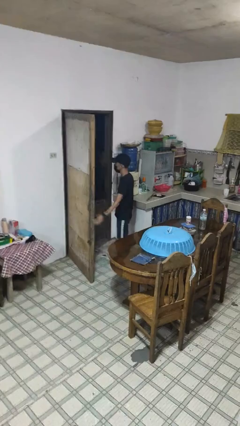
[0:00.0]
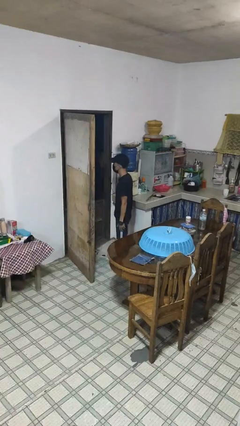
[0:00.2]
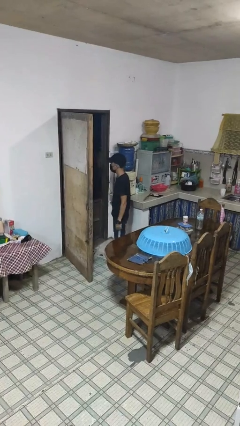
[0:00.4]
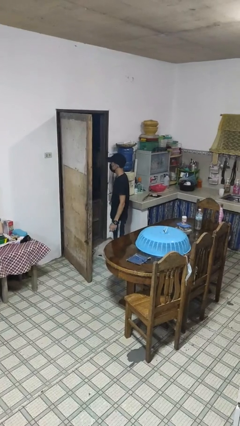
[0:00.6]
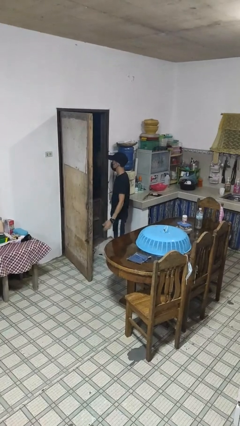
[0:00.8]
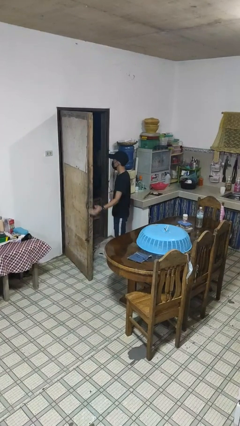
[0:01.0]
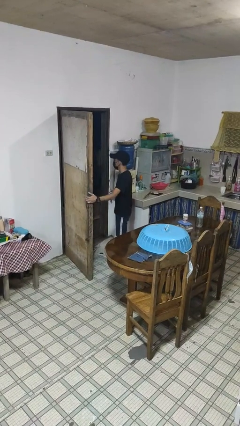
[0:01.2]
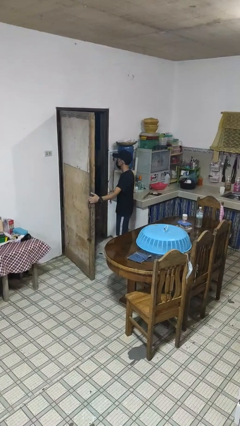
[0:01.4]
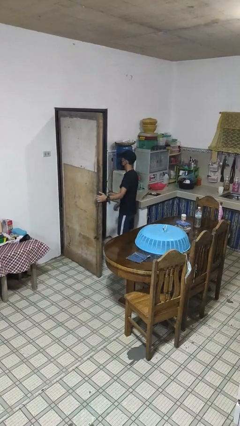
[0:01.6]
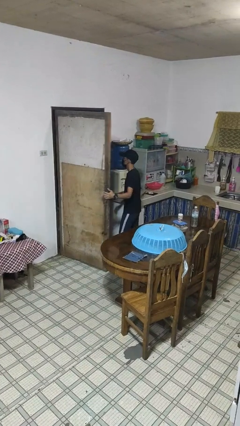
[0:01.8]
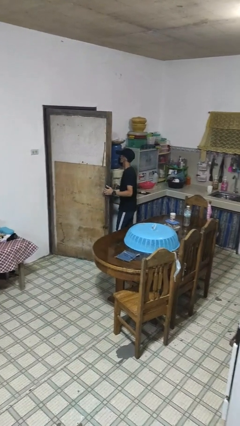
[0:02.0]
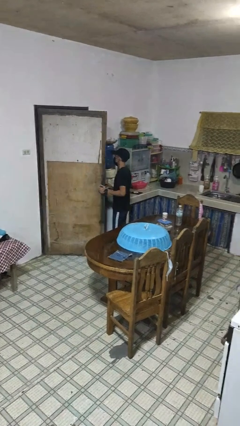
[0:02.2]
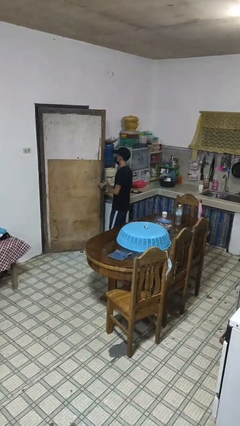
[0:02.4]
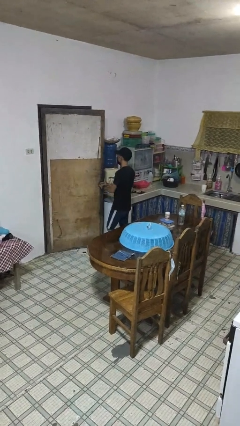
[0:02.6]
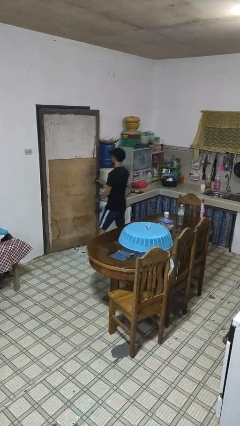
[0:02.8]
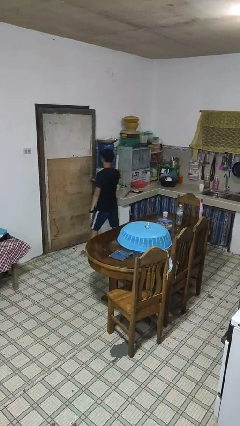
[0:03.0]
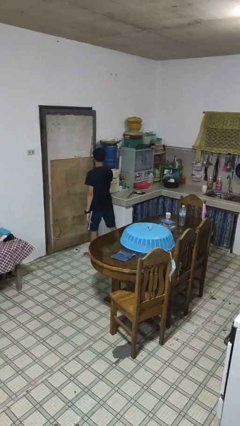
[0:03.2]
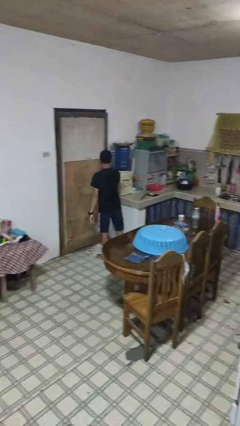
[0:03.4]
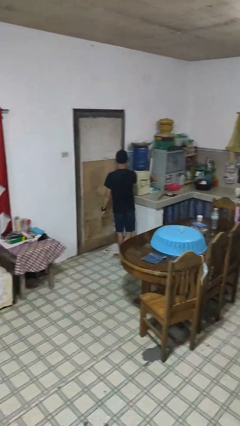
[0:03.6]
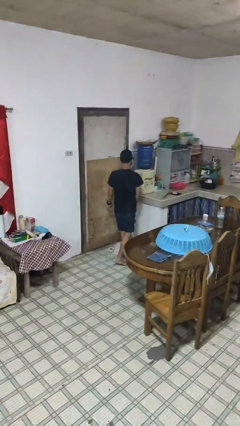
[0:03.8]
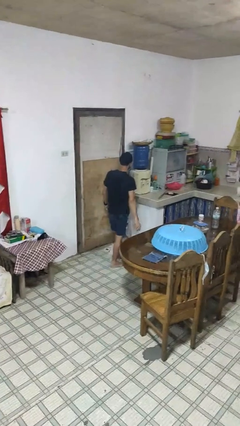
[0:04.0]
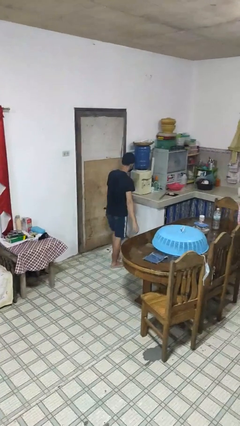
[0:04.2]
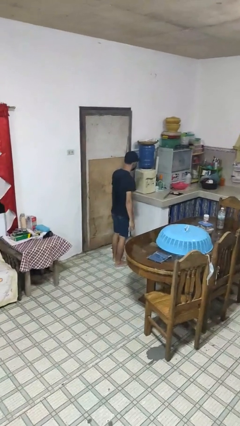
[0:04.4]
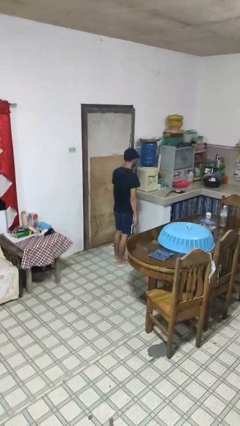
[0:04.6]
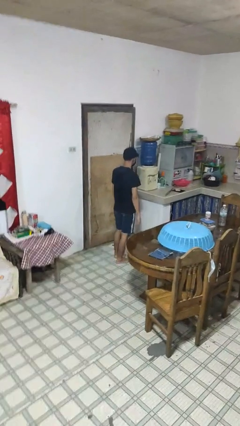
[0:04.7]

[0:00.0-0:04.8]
person closes facility door

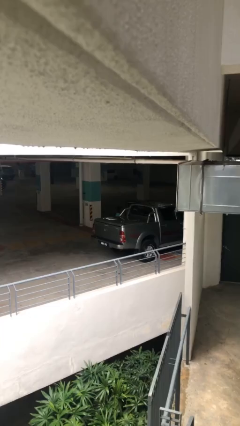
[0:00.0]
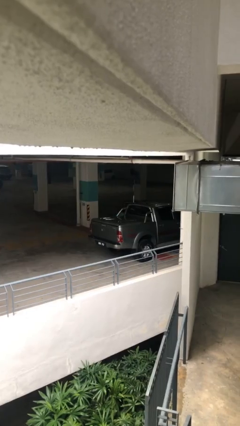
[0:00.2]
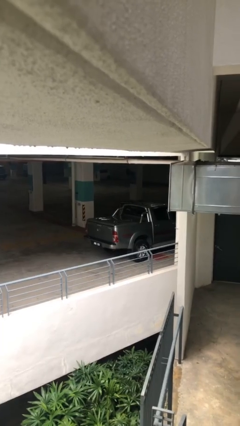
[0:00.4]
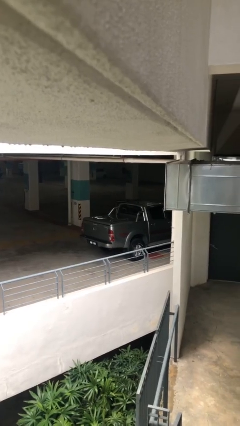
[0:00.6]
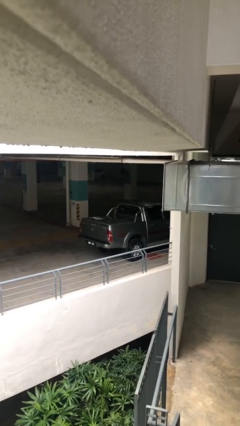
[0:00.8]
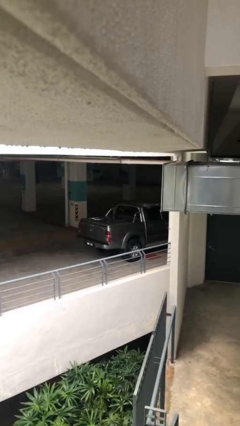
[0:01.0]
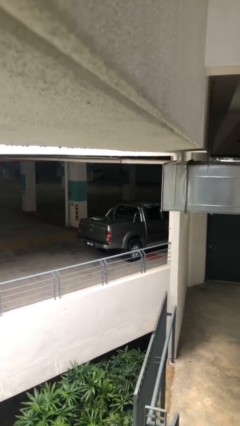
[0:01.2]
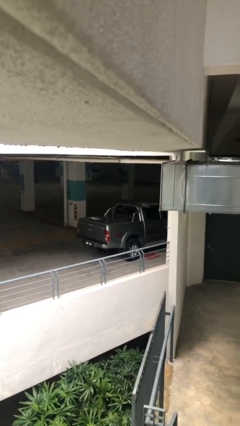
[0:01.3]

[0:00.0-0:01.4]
person enters car

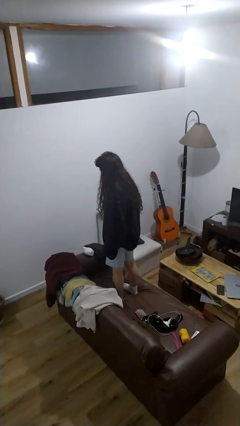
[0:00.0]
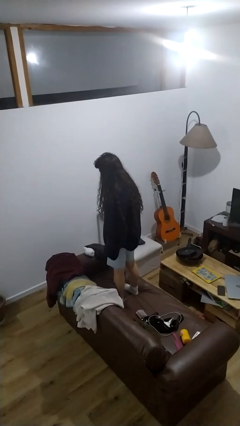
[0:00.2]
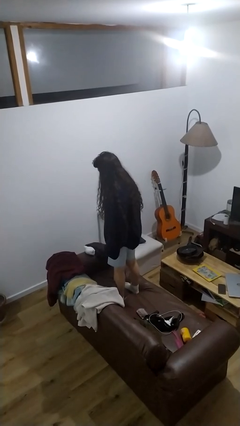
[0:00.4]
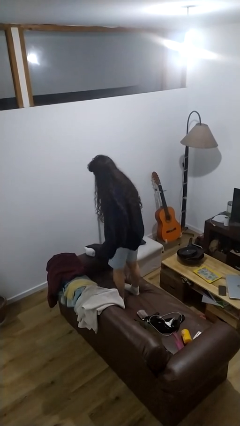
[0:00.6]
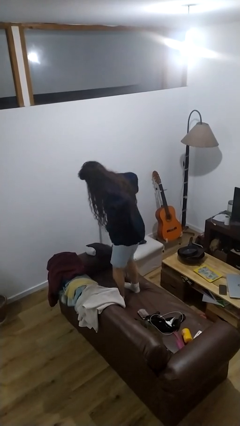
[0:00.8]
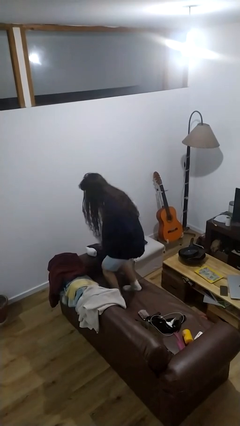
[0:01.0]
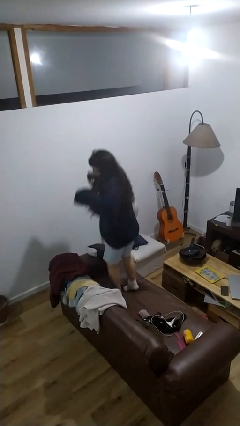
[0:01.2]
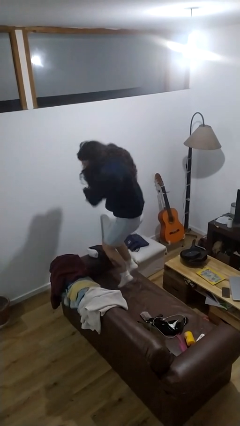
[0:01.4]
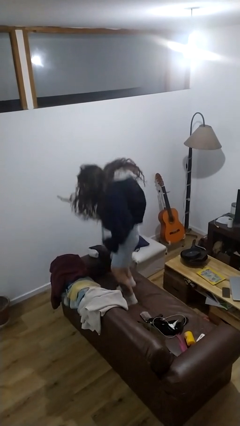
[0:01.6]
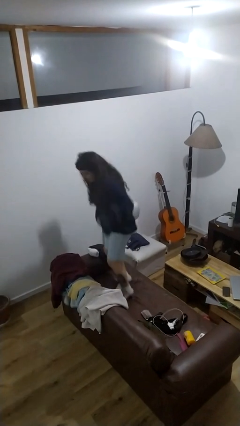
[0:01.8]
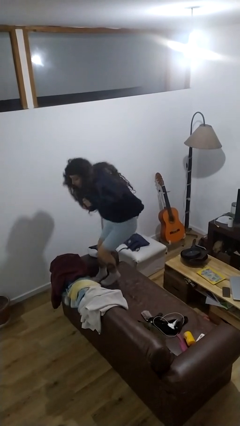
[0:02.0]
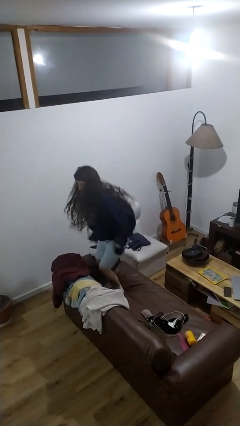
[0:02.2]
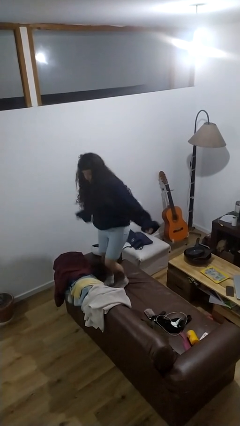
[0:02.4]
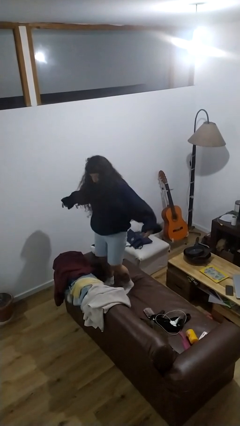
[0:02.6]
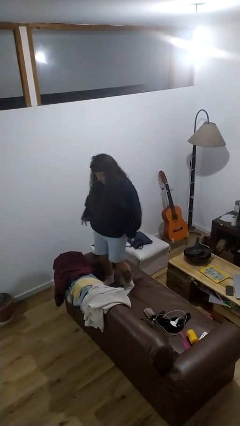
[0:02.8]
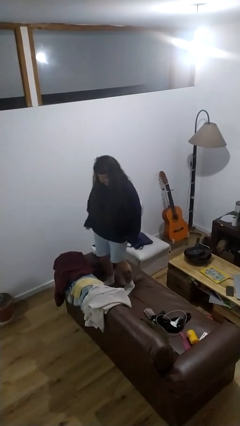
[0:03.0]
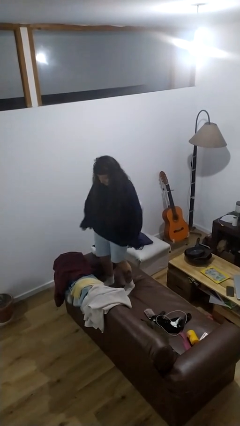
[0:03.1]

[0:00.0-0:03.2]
person jumps on couch

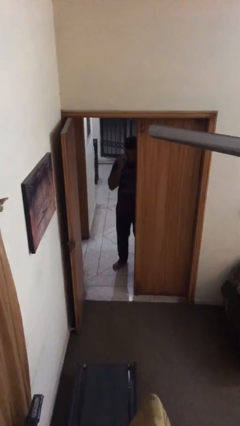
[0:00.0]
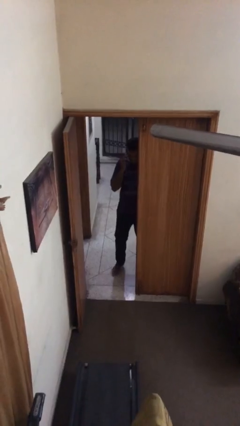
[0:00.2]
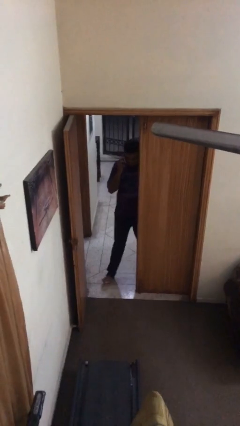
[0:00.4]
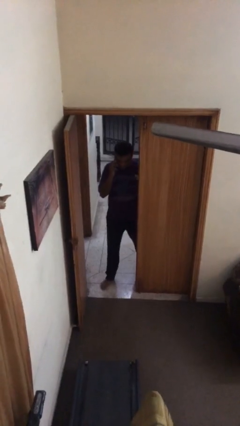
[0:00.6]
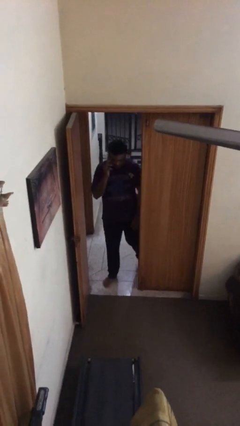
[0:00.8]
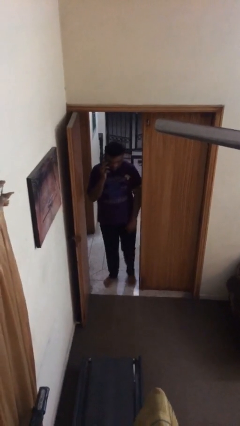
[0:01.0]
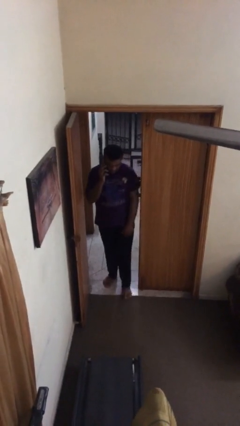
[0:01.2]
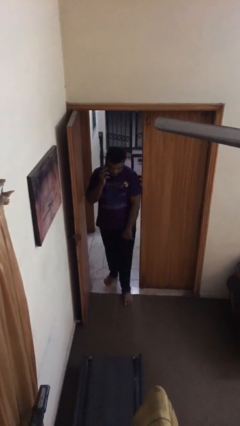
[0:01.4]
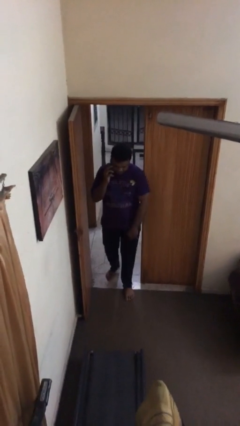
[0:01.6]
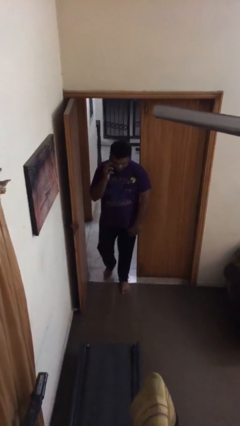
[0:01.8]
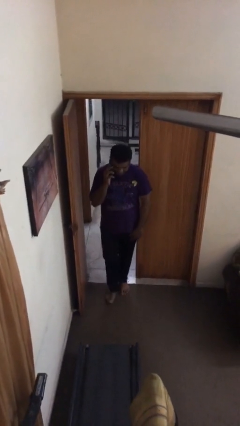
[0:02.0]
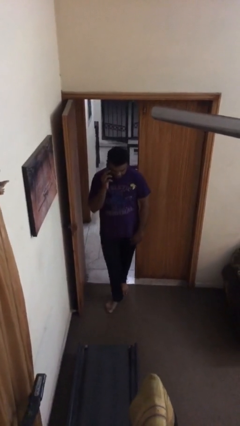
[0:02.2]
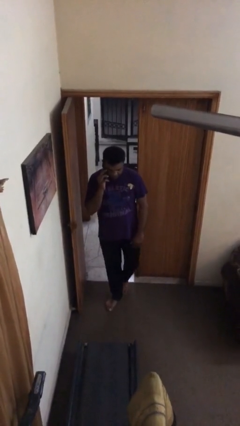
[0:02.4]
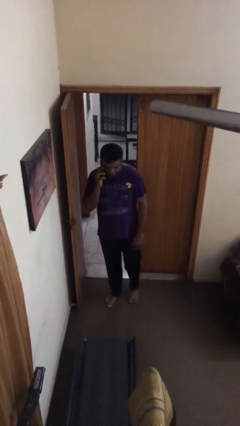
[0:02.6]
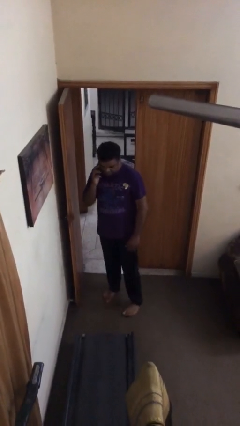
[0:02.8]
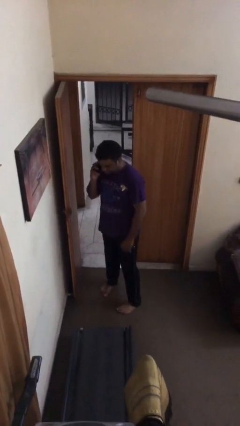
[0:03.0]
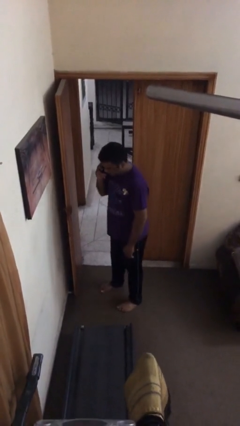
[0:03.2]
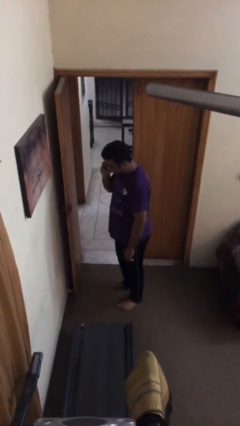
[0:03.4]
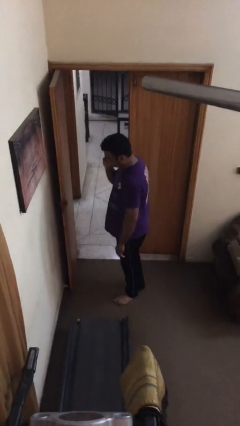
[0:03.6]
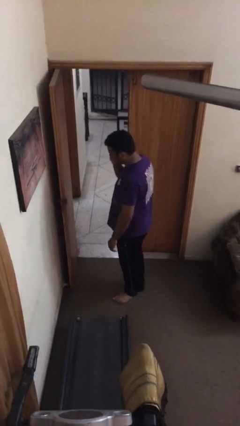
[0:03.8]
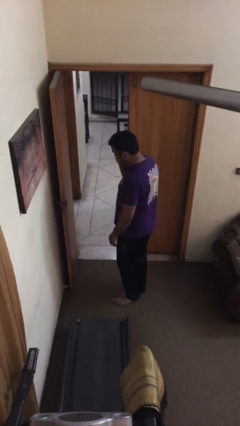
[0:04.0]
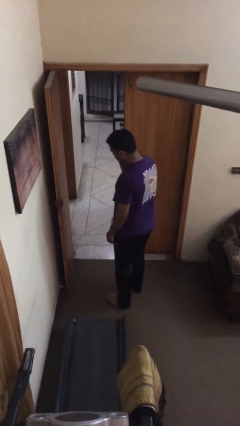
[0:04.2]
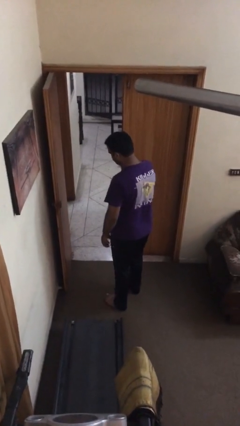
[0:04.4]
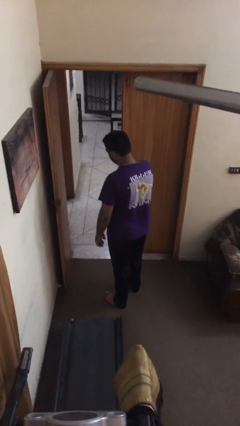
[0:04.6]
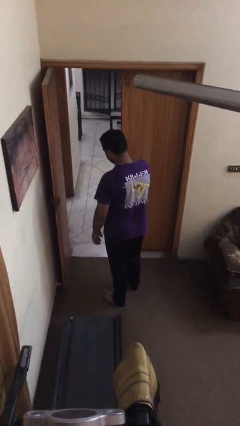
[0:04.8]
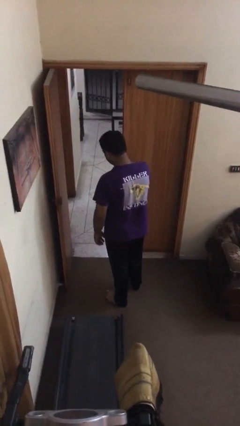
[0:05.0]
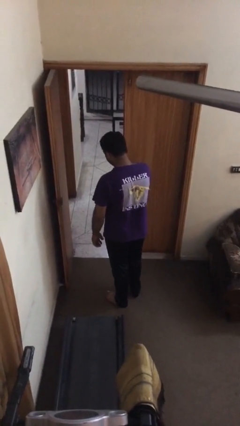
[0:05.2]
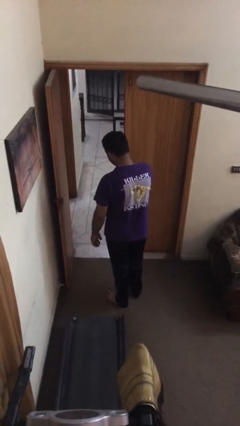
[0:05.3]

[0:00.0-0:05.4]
person enters scene through structure

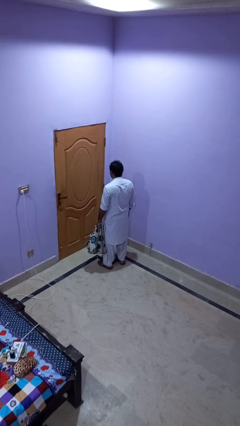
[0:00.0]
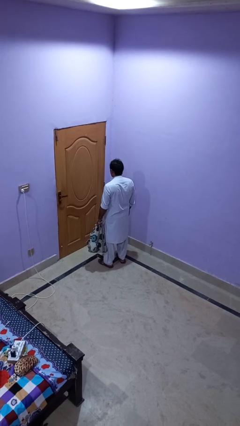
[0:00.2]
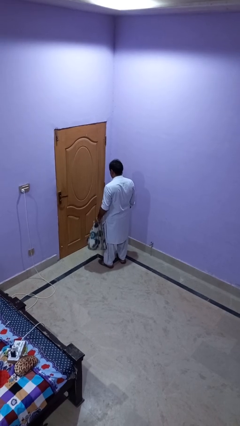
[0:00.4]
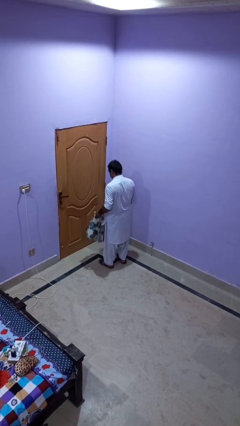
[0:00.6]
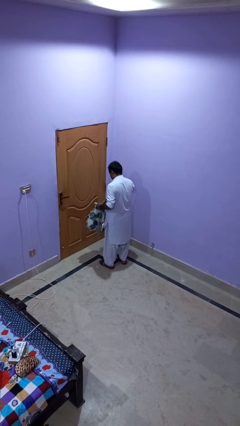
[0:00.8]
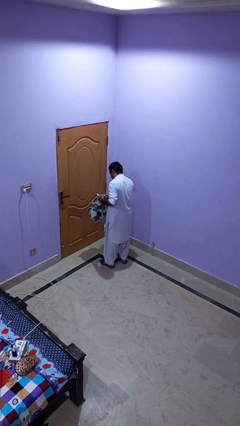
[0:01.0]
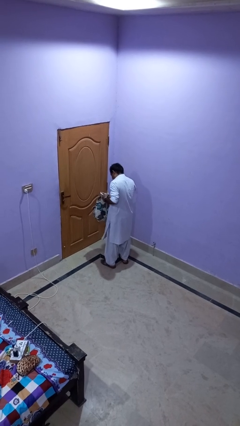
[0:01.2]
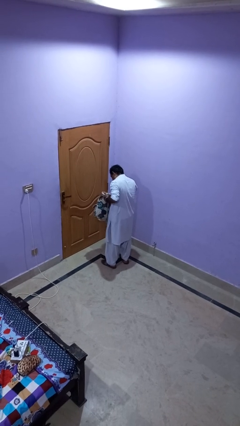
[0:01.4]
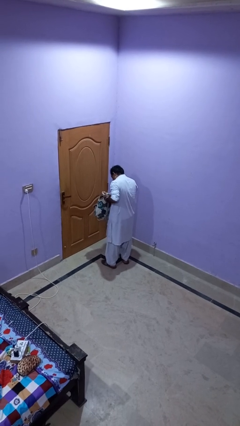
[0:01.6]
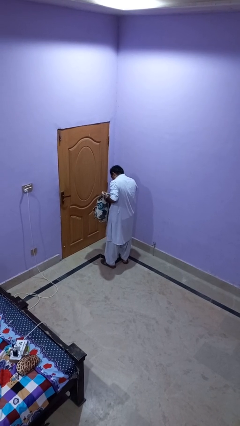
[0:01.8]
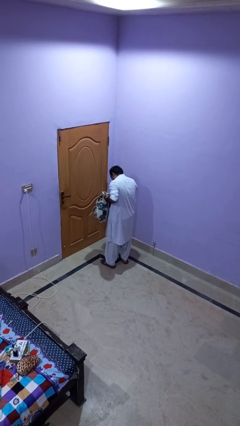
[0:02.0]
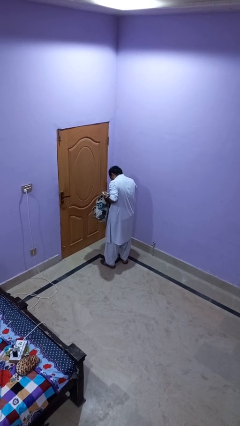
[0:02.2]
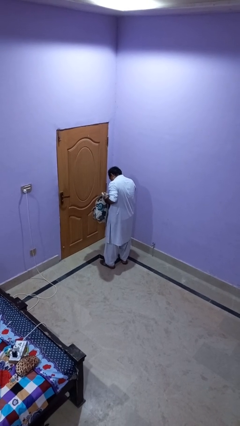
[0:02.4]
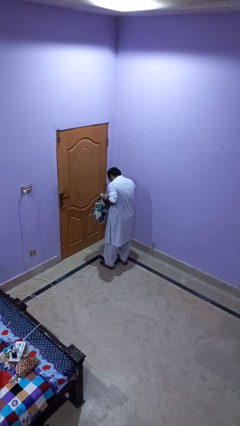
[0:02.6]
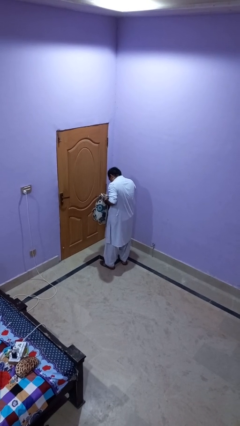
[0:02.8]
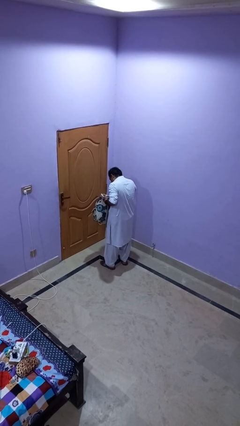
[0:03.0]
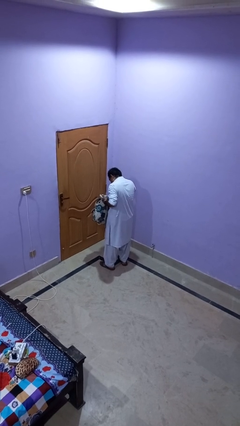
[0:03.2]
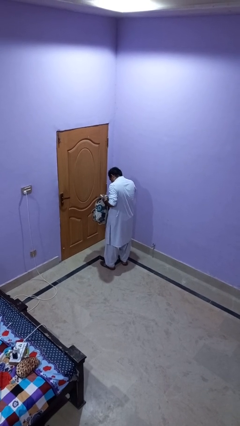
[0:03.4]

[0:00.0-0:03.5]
person searches in backpack
